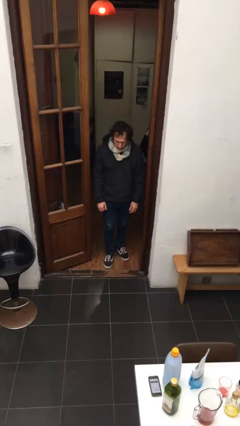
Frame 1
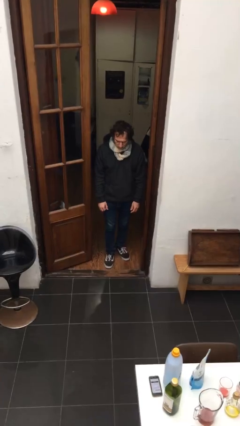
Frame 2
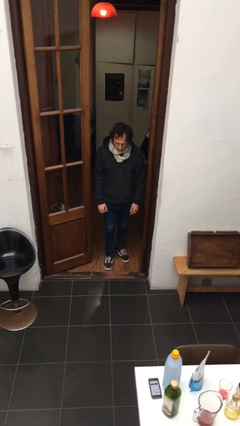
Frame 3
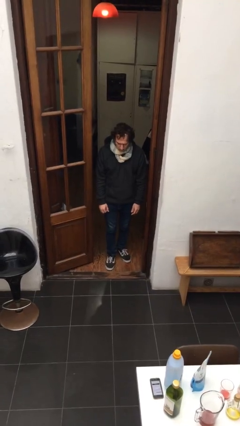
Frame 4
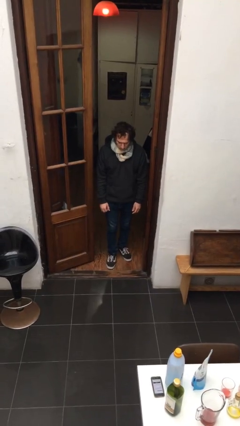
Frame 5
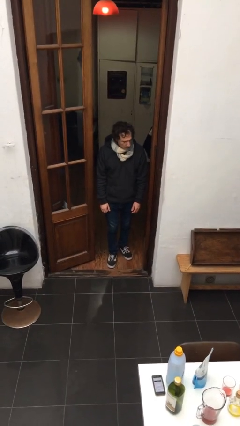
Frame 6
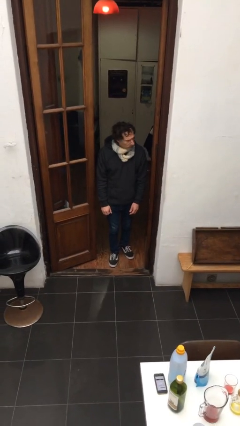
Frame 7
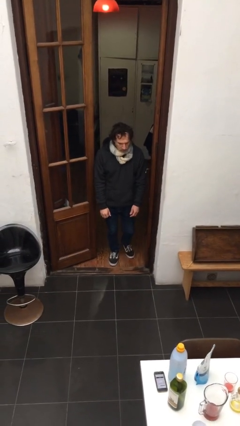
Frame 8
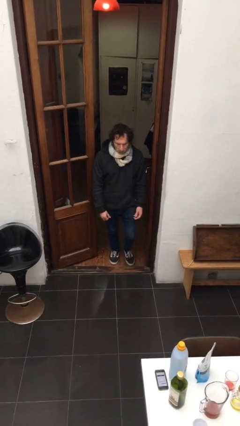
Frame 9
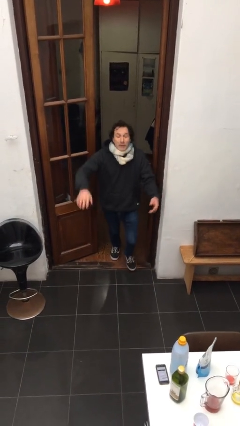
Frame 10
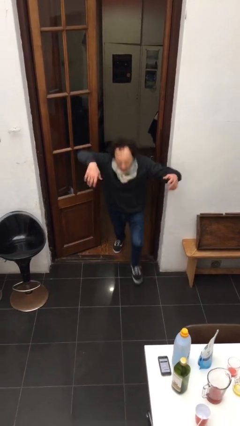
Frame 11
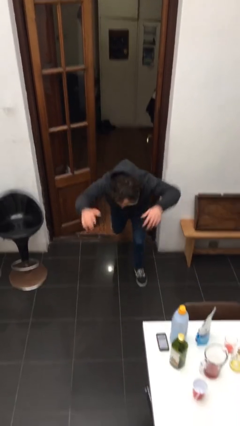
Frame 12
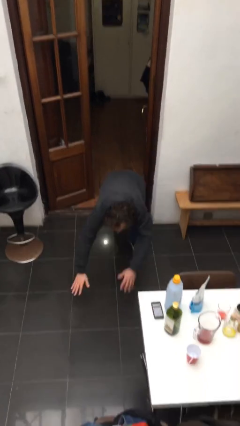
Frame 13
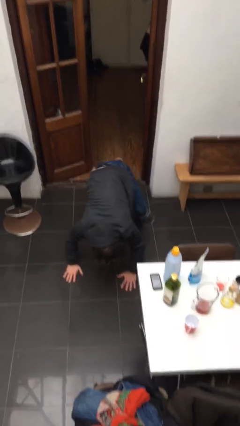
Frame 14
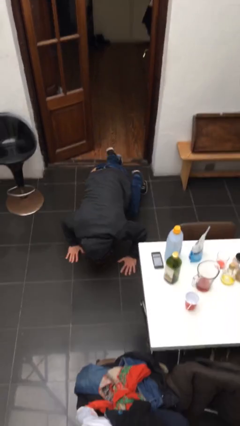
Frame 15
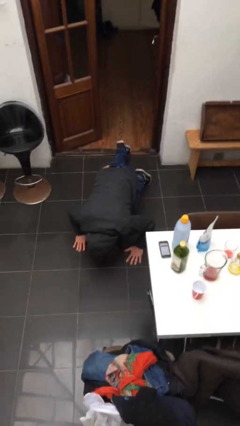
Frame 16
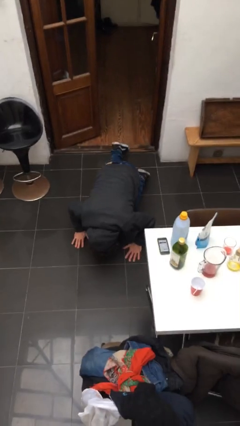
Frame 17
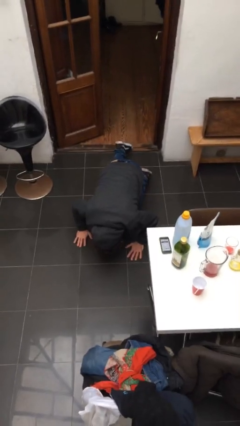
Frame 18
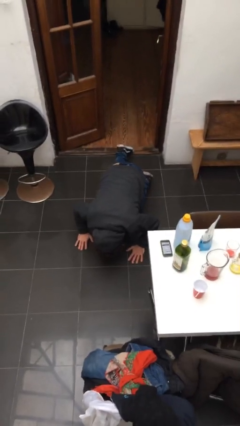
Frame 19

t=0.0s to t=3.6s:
person trips on object on floor

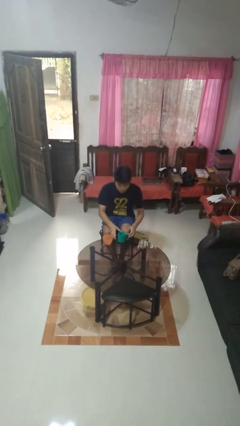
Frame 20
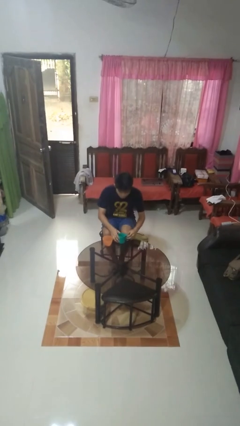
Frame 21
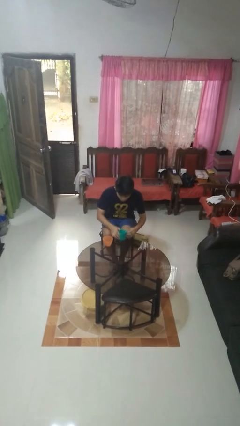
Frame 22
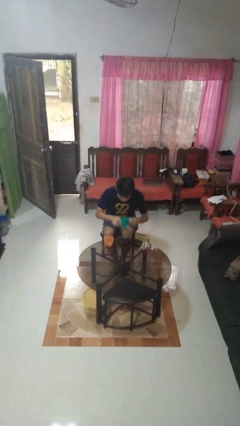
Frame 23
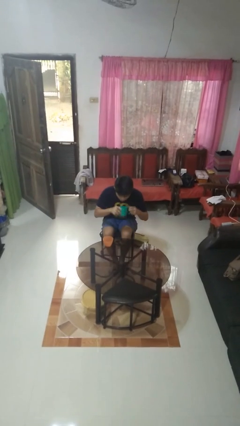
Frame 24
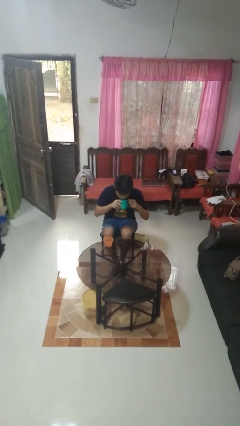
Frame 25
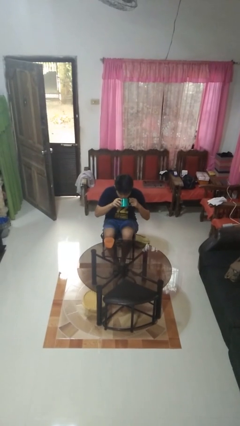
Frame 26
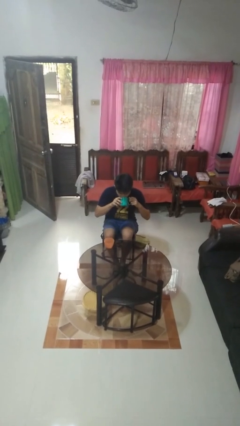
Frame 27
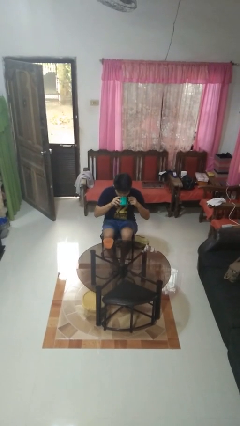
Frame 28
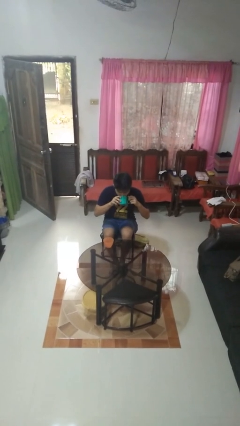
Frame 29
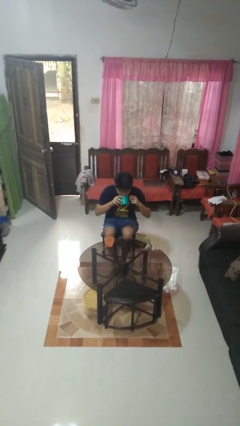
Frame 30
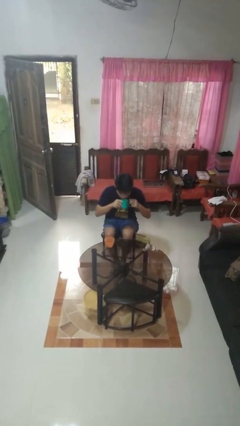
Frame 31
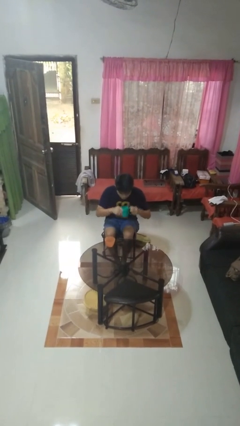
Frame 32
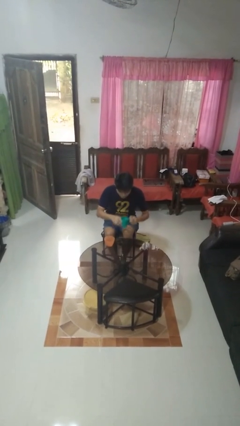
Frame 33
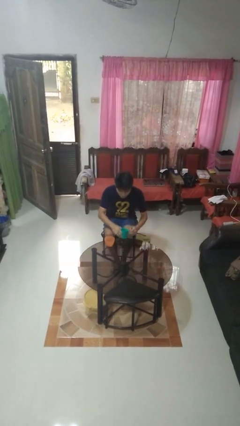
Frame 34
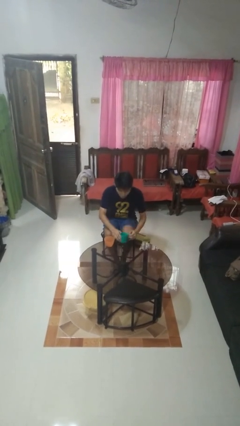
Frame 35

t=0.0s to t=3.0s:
person drinks from cup

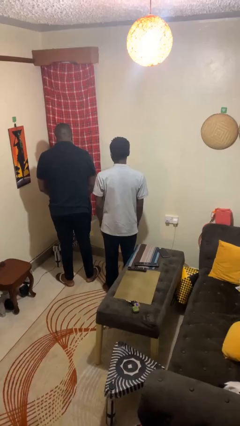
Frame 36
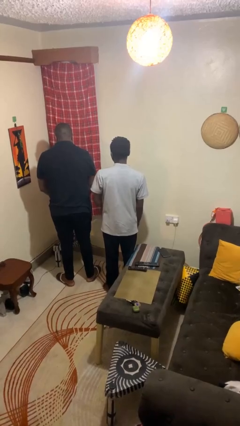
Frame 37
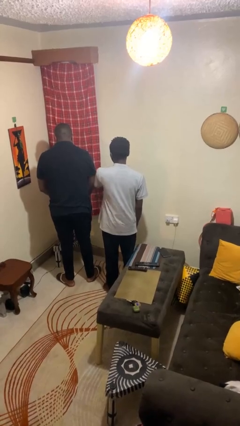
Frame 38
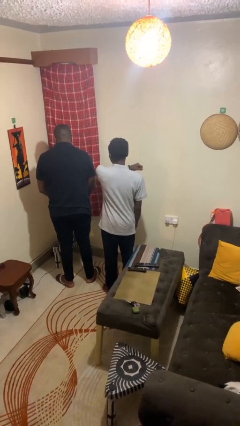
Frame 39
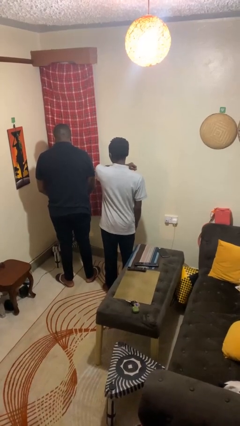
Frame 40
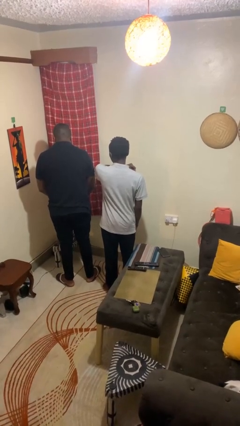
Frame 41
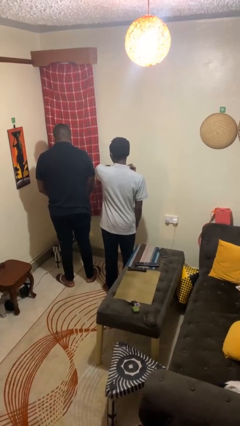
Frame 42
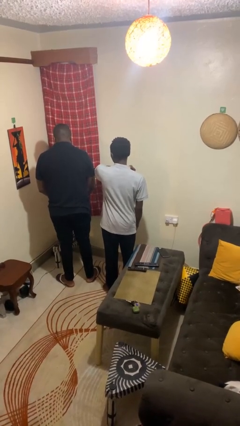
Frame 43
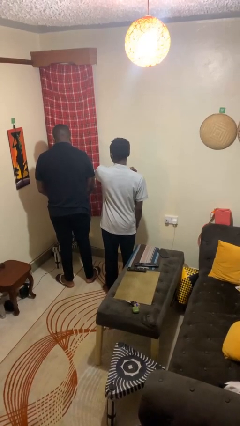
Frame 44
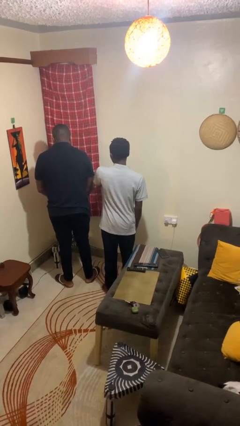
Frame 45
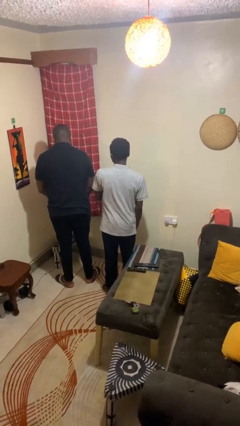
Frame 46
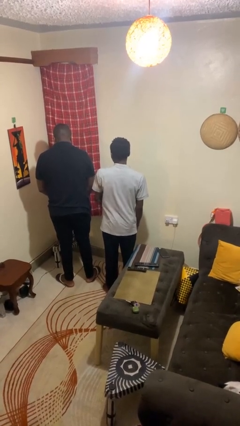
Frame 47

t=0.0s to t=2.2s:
person nudges person with elbow

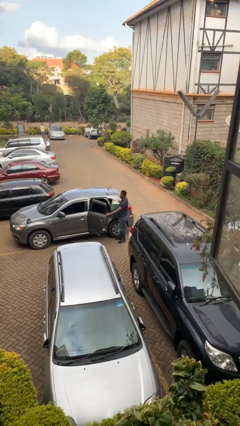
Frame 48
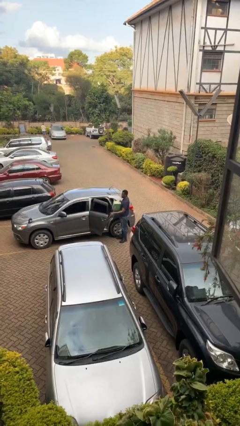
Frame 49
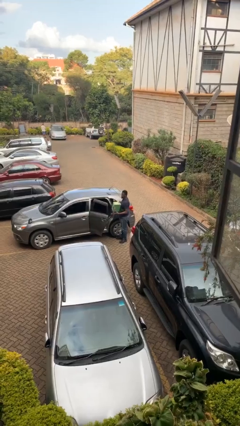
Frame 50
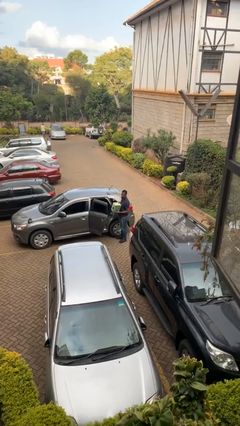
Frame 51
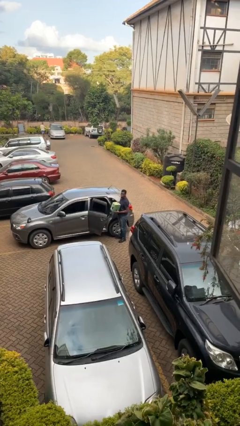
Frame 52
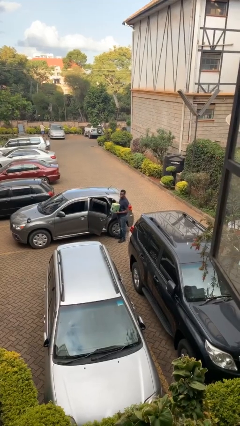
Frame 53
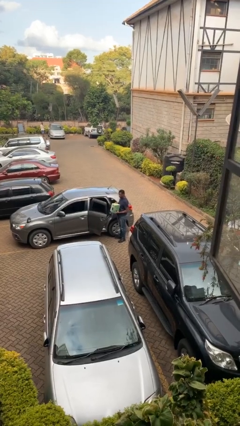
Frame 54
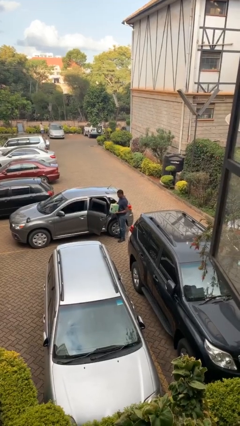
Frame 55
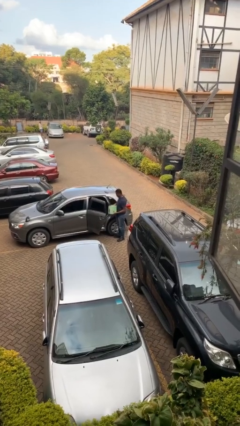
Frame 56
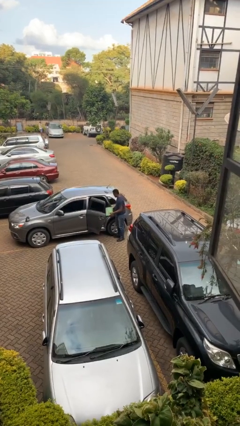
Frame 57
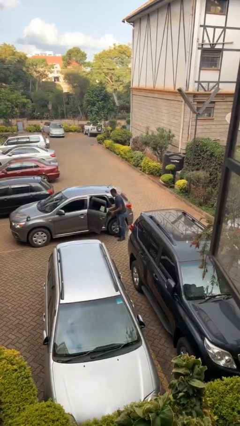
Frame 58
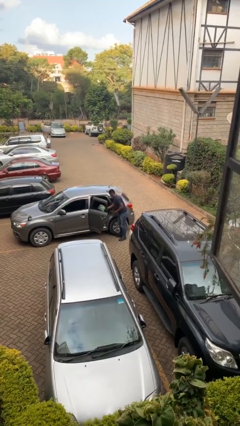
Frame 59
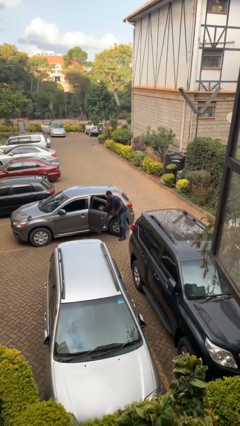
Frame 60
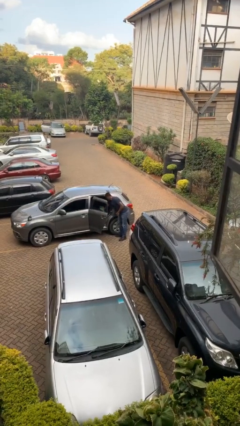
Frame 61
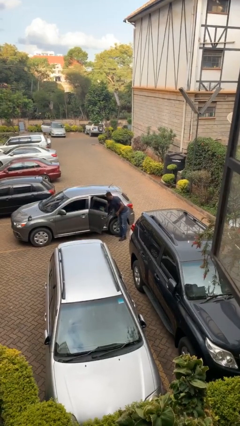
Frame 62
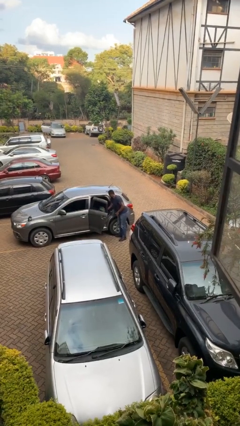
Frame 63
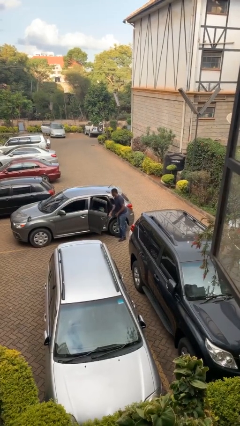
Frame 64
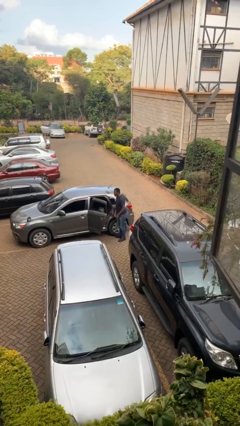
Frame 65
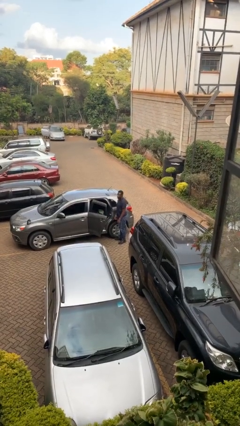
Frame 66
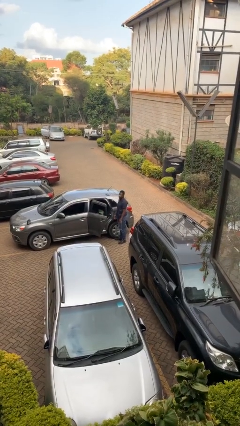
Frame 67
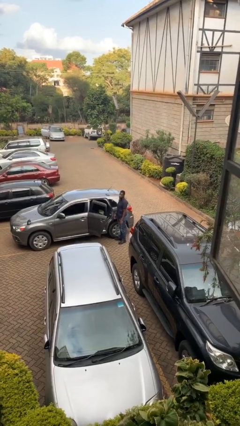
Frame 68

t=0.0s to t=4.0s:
person loads car

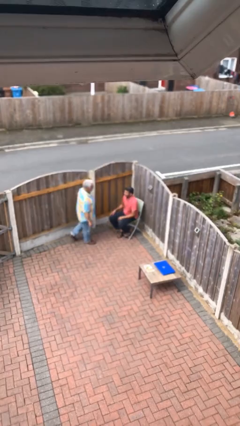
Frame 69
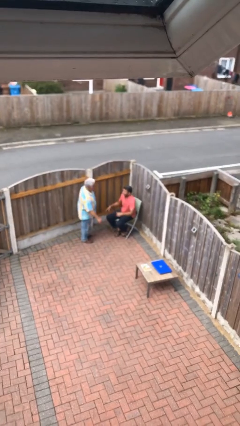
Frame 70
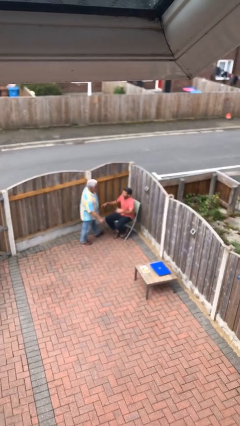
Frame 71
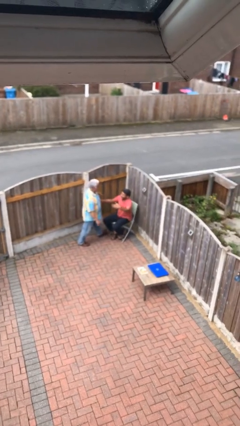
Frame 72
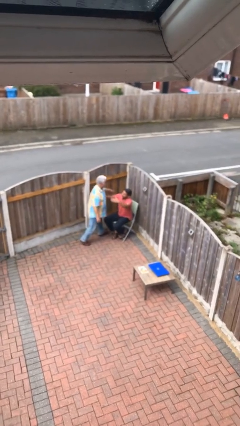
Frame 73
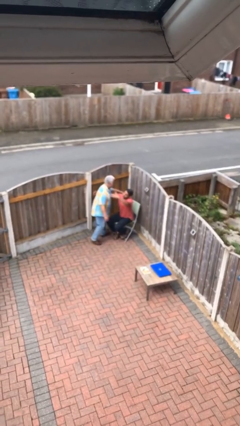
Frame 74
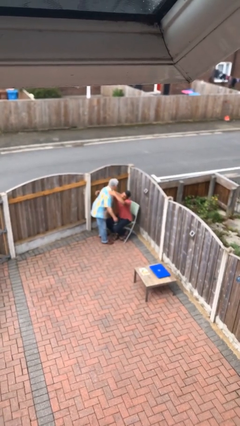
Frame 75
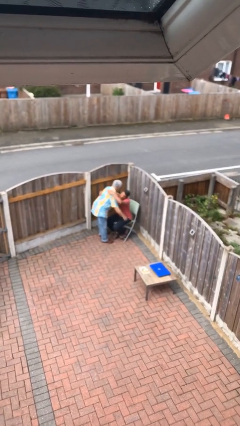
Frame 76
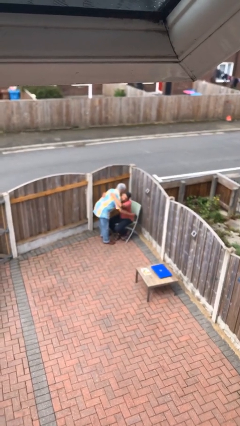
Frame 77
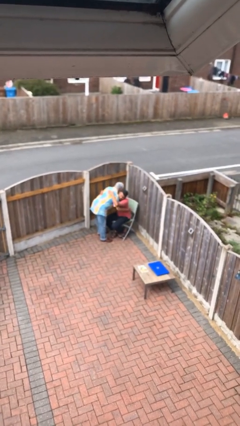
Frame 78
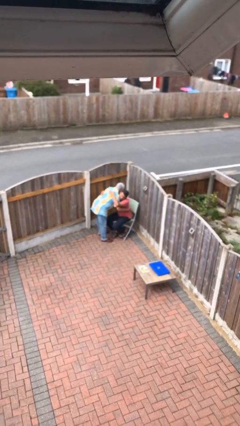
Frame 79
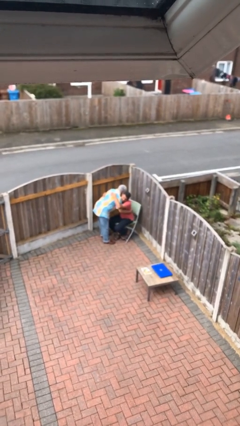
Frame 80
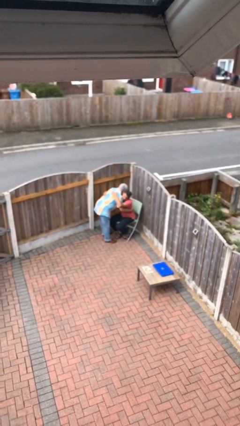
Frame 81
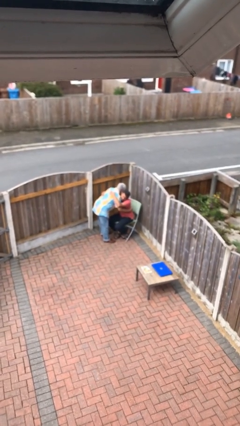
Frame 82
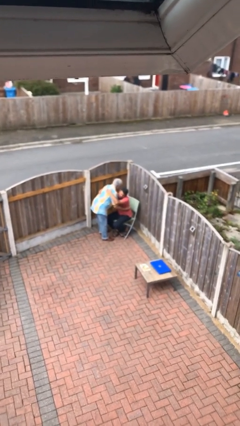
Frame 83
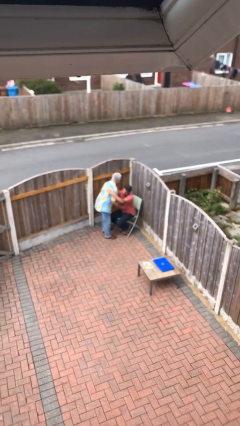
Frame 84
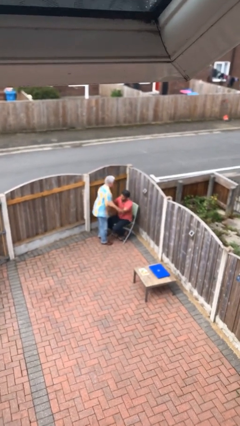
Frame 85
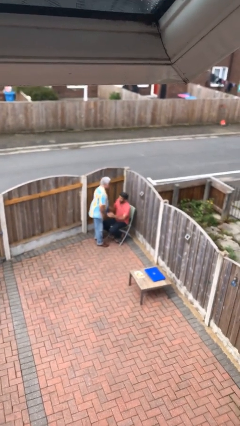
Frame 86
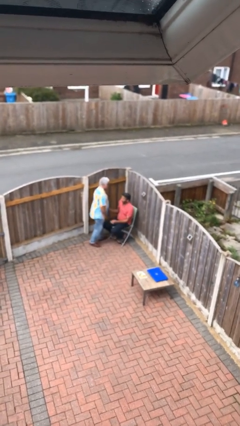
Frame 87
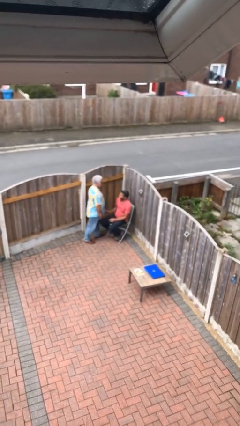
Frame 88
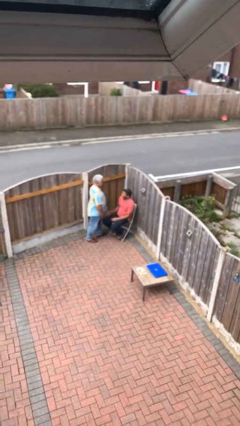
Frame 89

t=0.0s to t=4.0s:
person embraces person

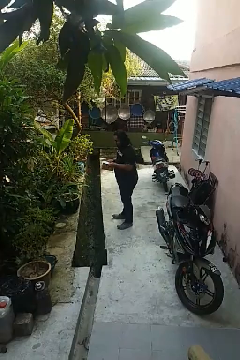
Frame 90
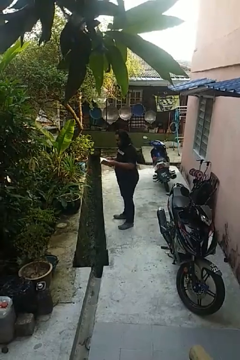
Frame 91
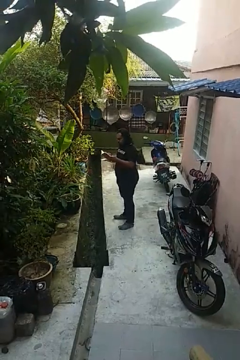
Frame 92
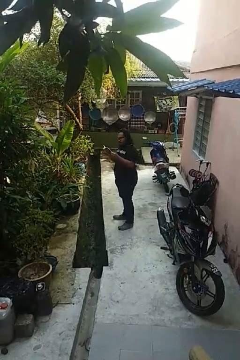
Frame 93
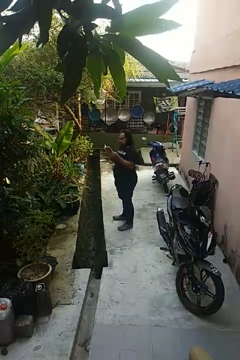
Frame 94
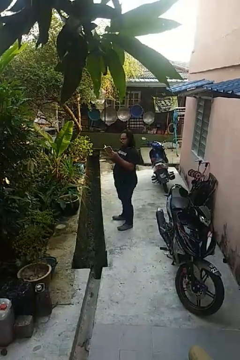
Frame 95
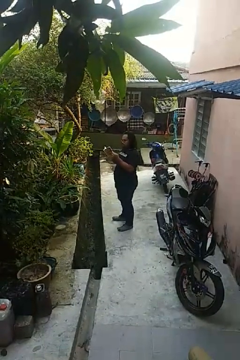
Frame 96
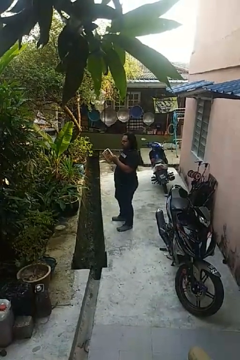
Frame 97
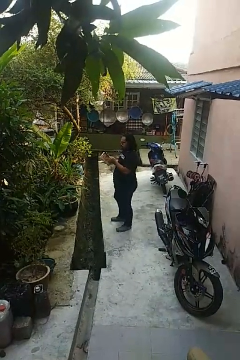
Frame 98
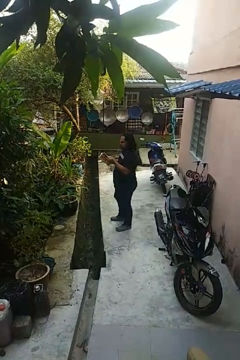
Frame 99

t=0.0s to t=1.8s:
person reads book
